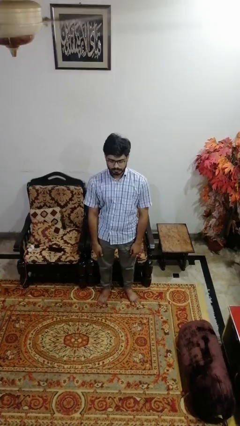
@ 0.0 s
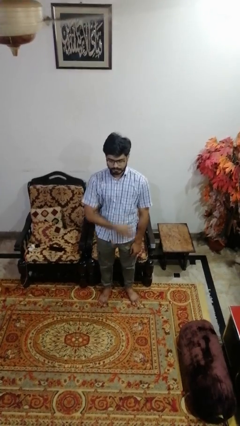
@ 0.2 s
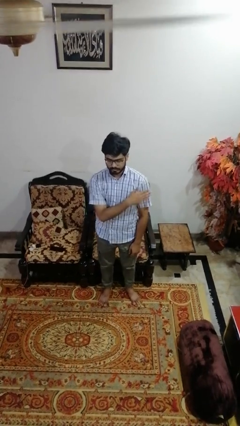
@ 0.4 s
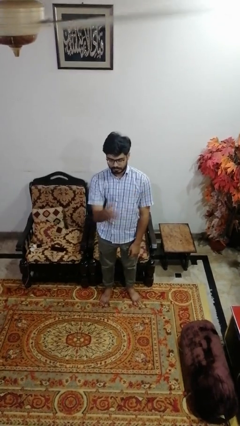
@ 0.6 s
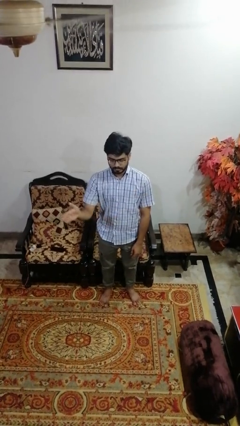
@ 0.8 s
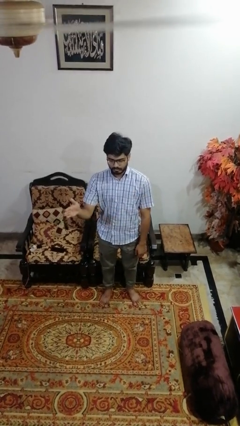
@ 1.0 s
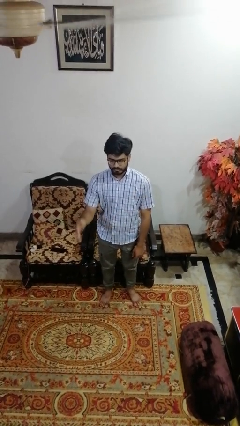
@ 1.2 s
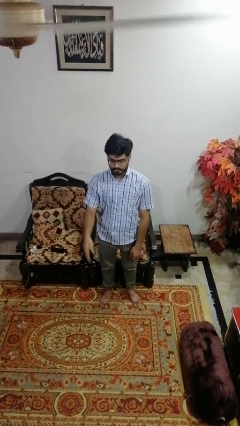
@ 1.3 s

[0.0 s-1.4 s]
person gestures swipe right

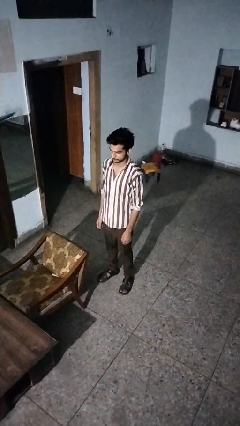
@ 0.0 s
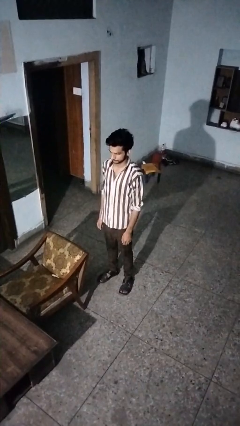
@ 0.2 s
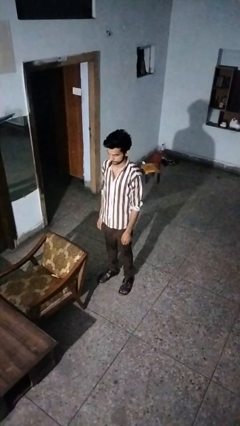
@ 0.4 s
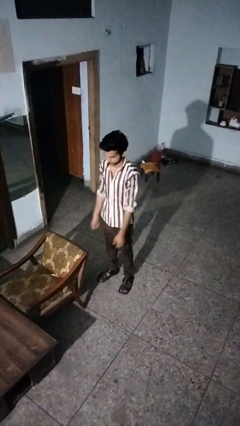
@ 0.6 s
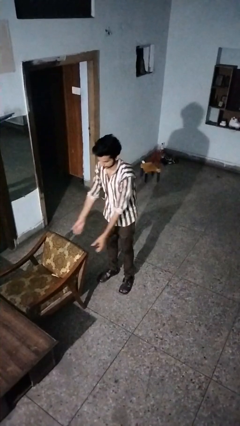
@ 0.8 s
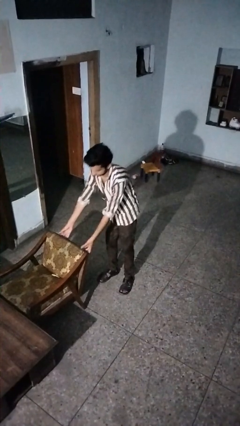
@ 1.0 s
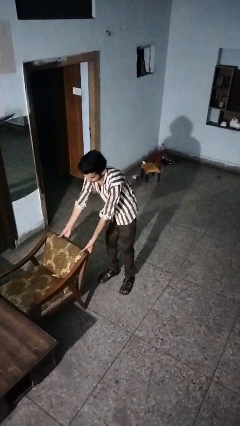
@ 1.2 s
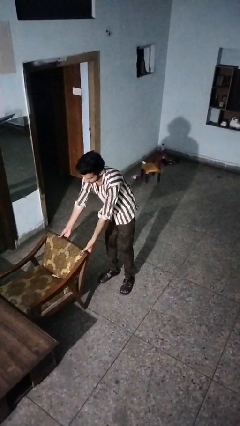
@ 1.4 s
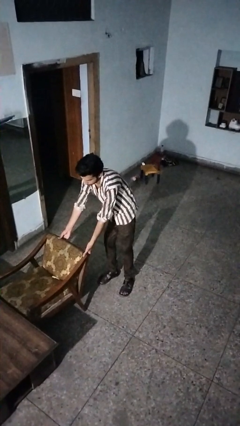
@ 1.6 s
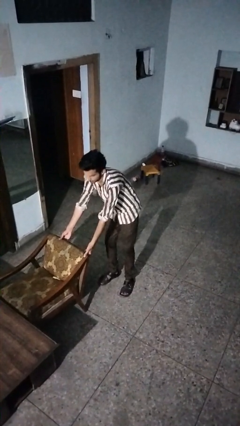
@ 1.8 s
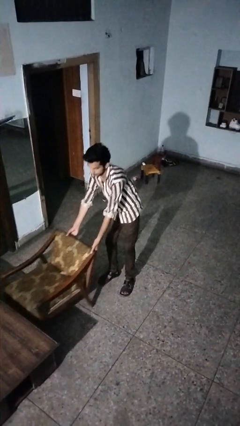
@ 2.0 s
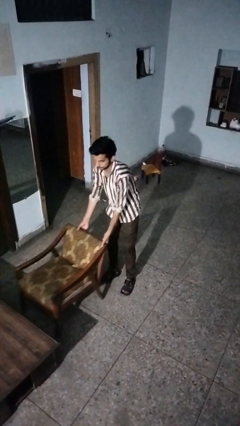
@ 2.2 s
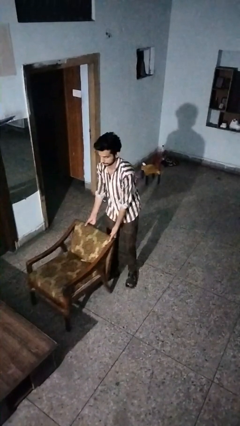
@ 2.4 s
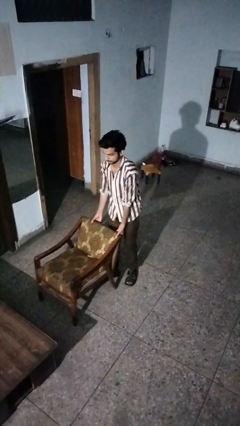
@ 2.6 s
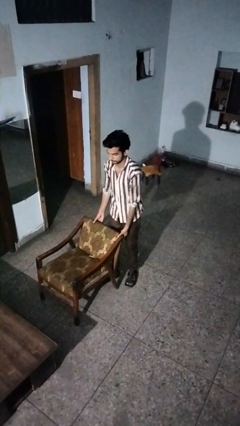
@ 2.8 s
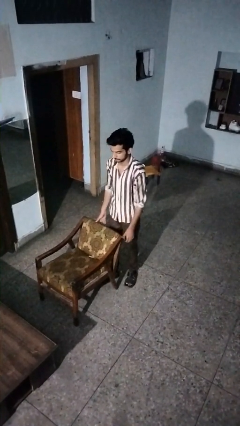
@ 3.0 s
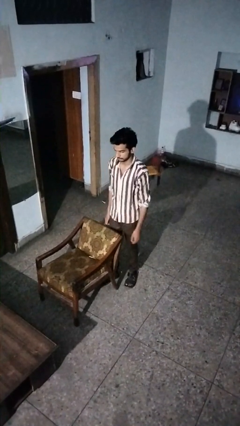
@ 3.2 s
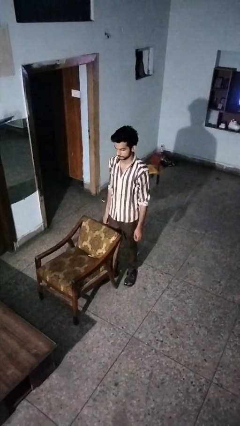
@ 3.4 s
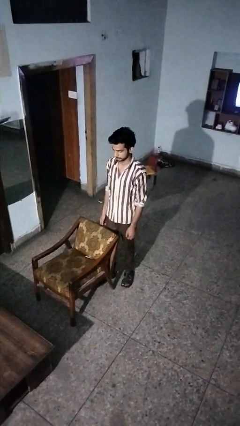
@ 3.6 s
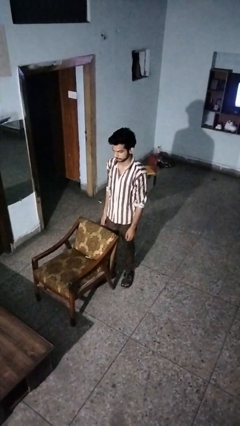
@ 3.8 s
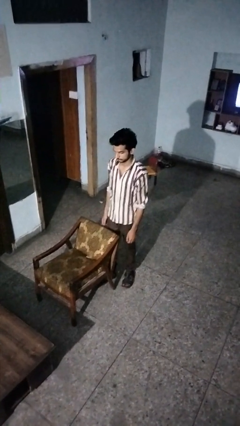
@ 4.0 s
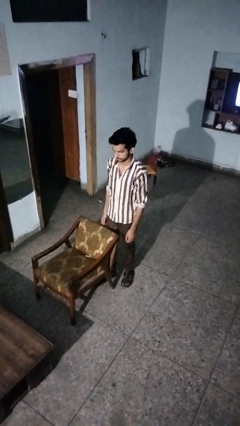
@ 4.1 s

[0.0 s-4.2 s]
person pulls out chair

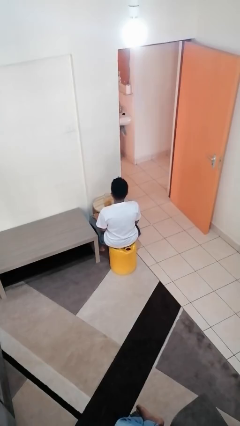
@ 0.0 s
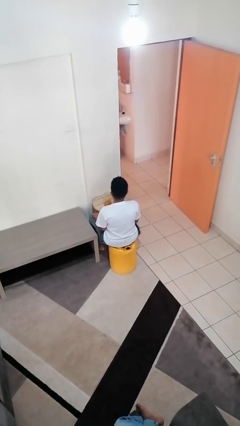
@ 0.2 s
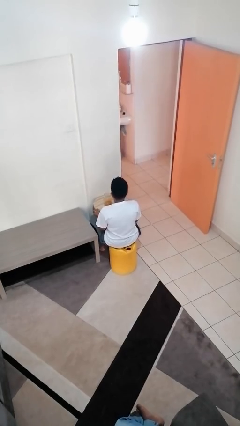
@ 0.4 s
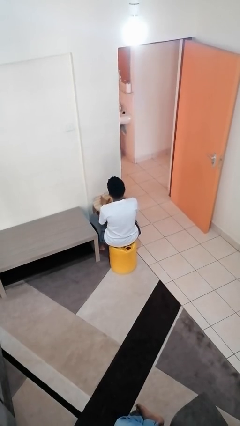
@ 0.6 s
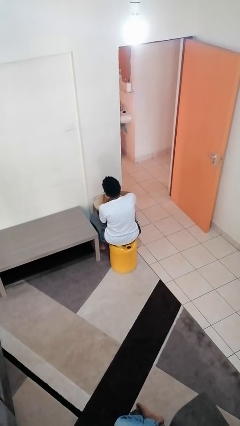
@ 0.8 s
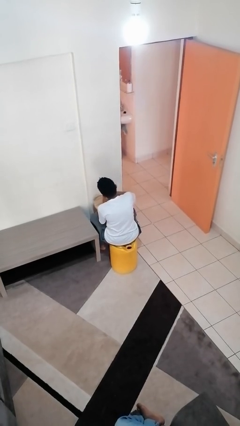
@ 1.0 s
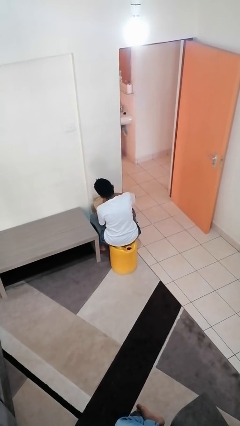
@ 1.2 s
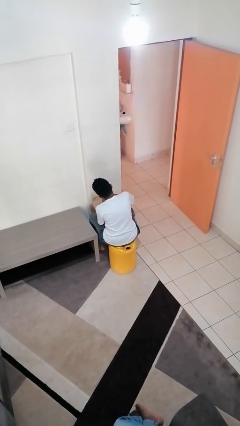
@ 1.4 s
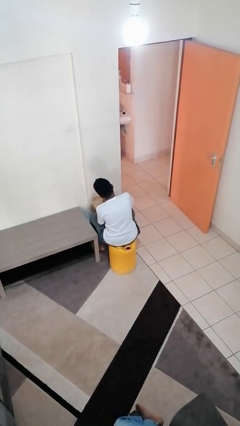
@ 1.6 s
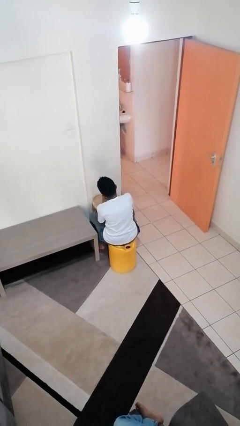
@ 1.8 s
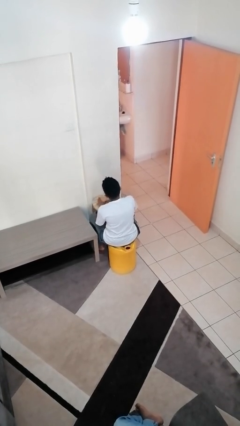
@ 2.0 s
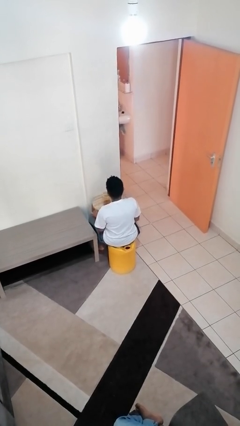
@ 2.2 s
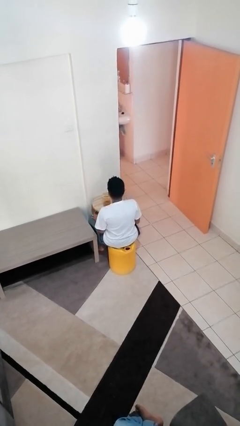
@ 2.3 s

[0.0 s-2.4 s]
person closes jar

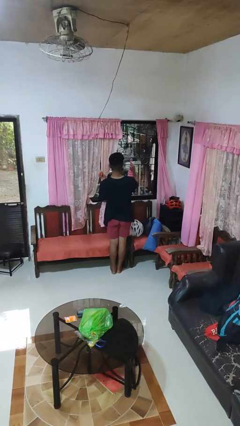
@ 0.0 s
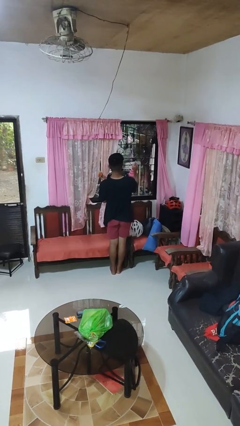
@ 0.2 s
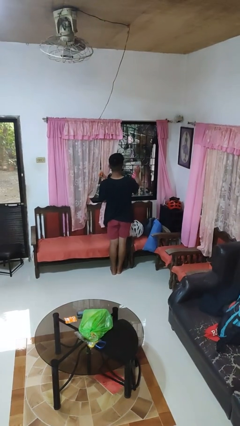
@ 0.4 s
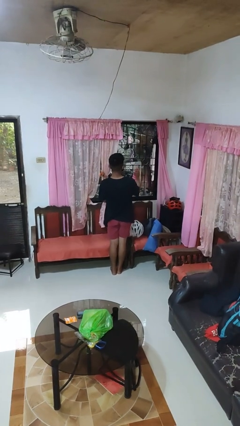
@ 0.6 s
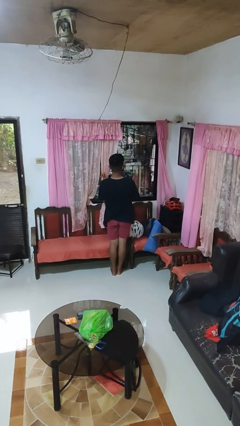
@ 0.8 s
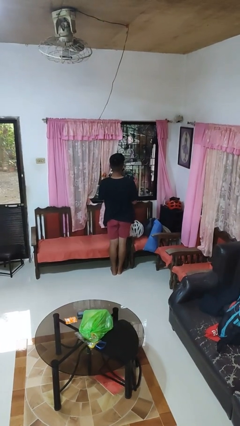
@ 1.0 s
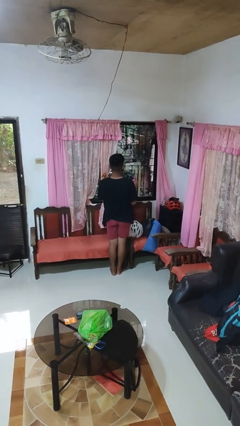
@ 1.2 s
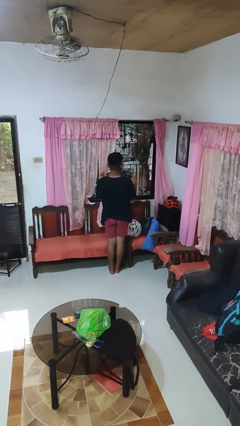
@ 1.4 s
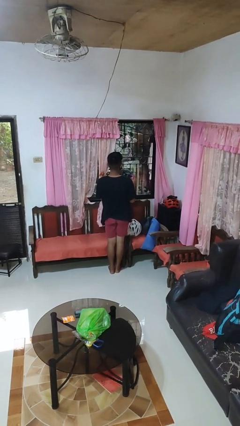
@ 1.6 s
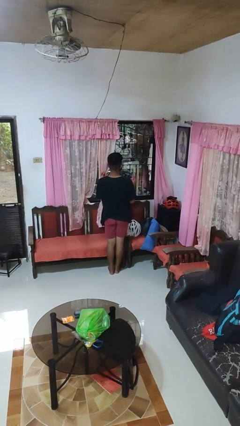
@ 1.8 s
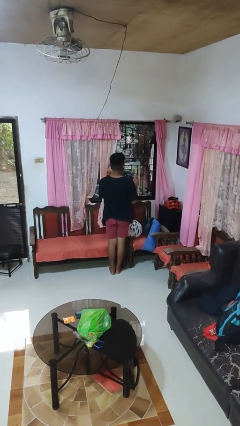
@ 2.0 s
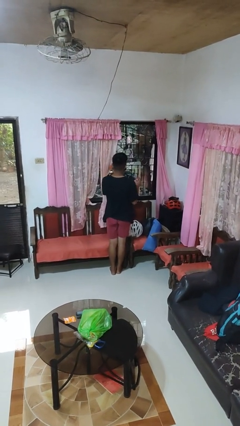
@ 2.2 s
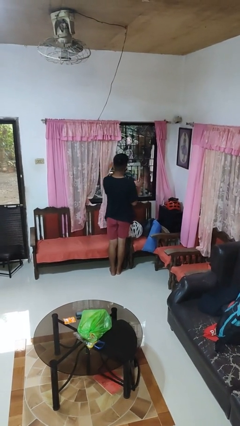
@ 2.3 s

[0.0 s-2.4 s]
person sprays from bottle

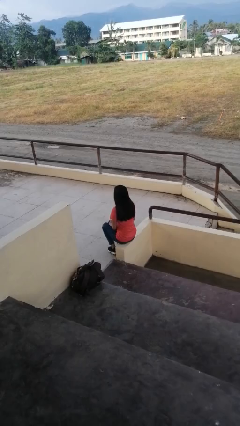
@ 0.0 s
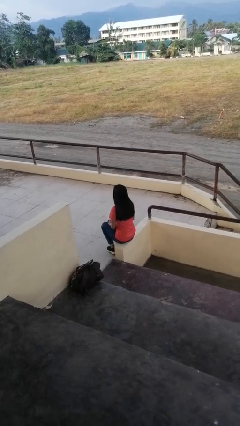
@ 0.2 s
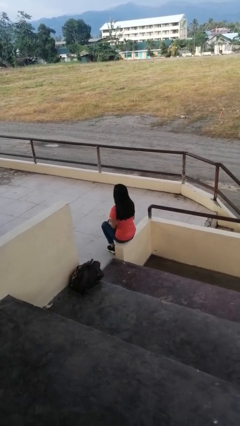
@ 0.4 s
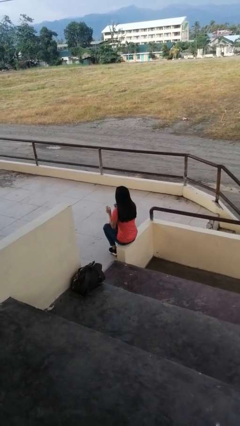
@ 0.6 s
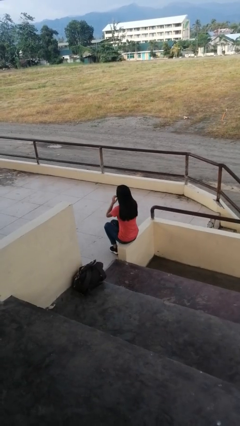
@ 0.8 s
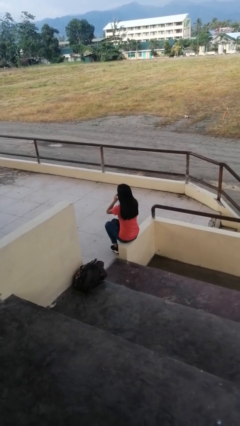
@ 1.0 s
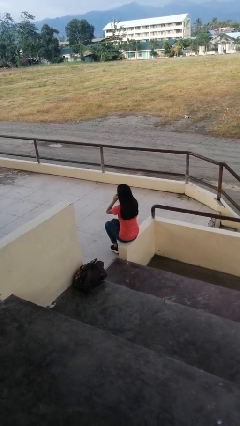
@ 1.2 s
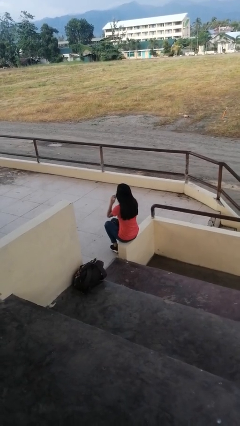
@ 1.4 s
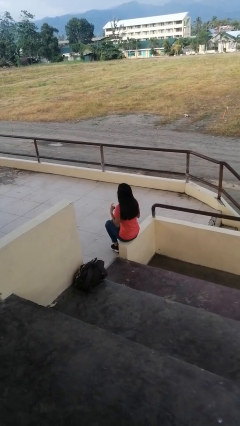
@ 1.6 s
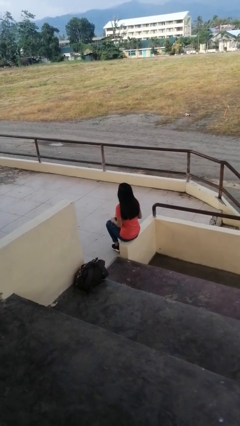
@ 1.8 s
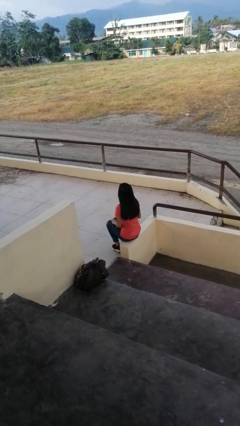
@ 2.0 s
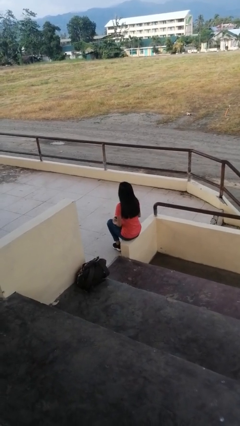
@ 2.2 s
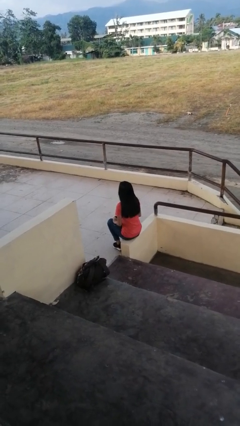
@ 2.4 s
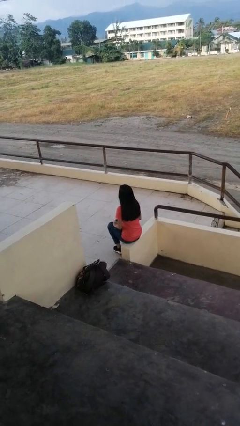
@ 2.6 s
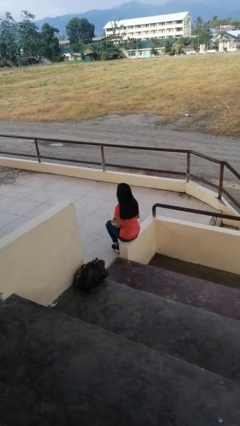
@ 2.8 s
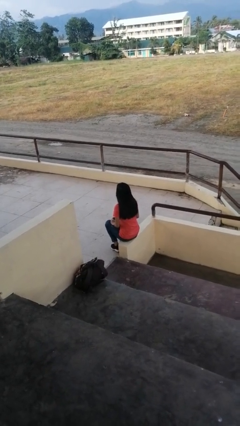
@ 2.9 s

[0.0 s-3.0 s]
person takes off headphones

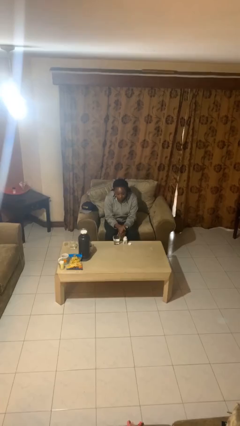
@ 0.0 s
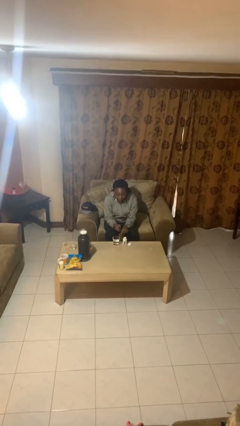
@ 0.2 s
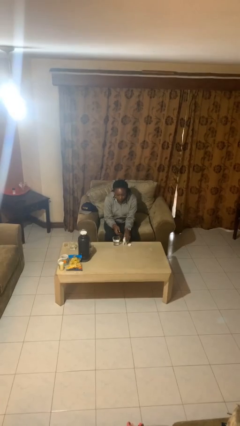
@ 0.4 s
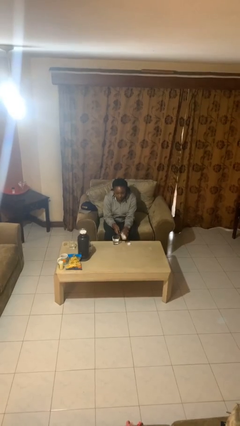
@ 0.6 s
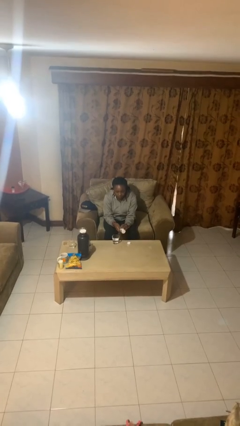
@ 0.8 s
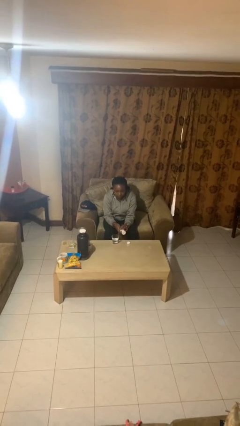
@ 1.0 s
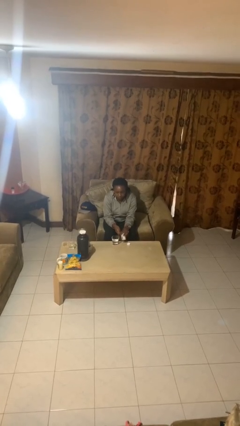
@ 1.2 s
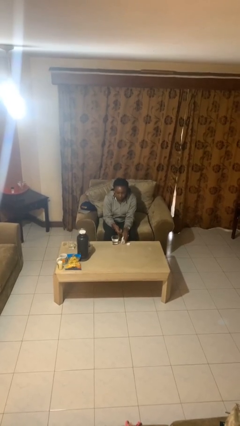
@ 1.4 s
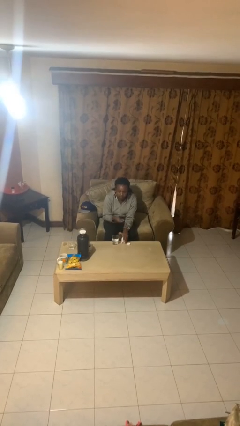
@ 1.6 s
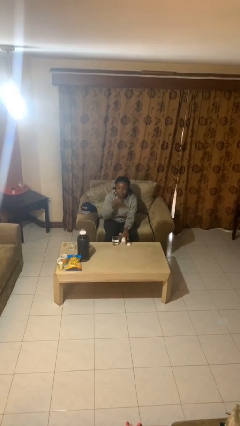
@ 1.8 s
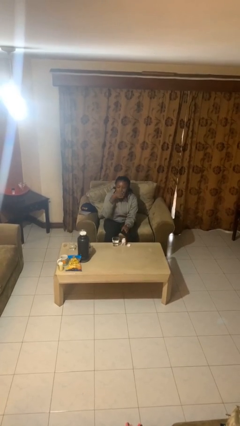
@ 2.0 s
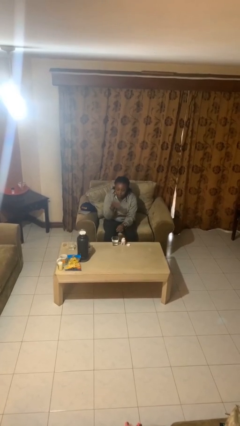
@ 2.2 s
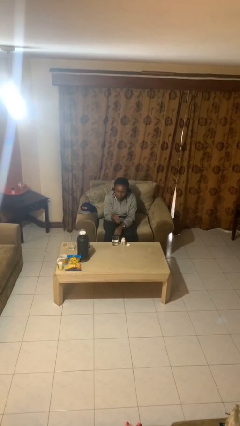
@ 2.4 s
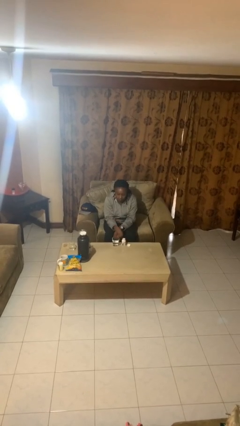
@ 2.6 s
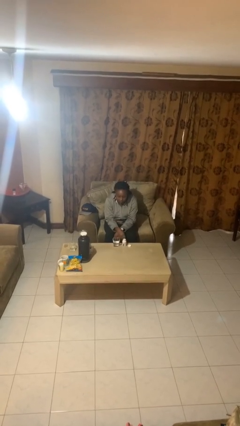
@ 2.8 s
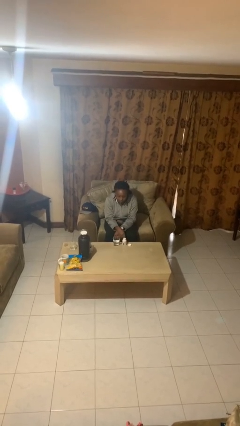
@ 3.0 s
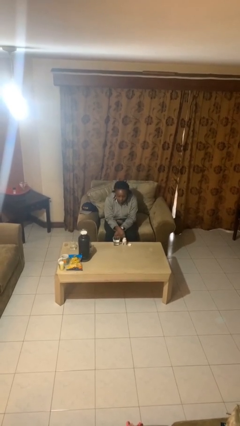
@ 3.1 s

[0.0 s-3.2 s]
person takes medicine pills

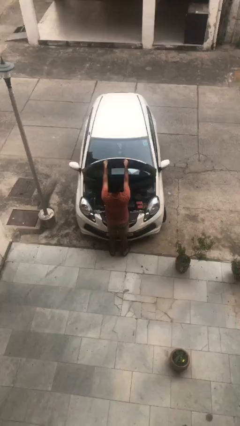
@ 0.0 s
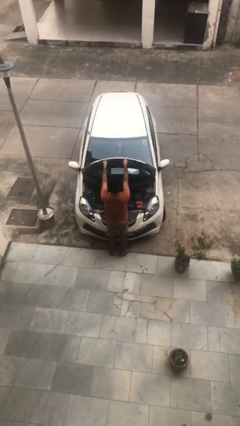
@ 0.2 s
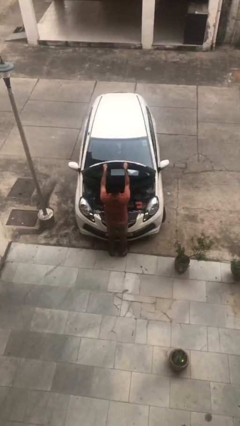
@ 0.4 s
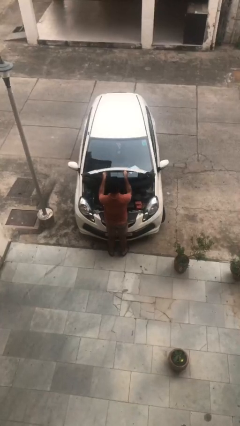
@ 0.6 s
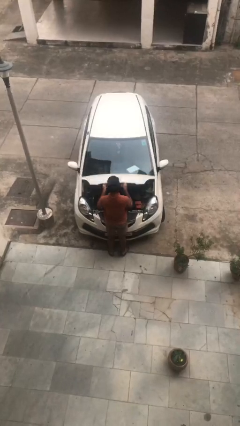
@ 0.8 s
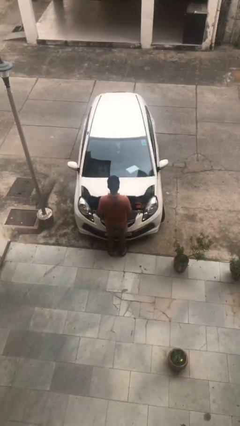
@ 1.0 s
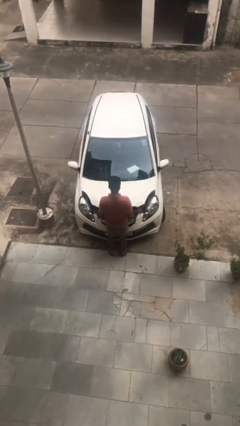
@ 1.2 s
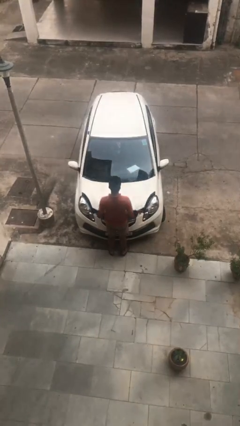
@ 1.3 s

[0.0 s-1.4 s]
person closes car hood
